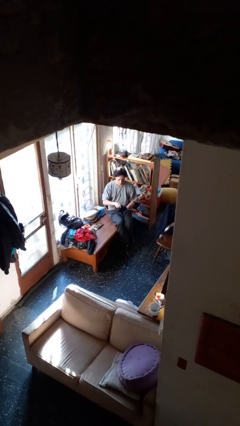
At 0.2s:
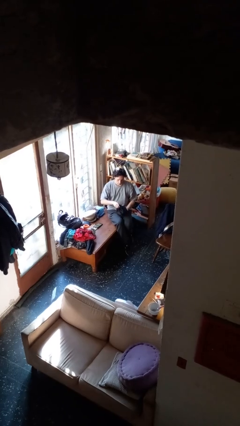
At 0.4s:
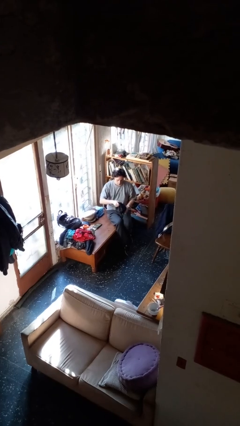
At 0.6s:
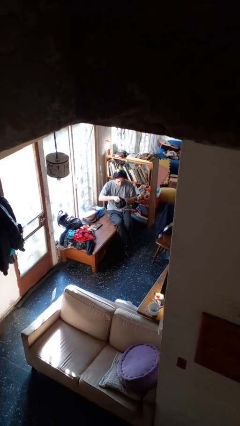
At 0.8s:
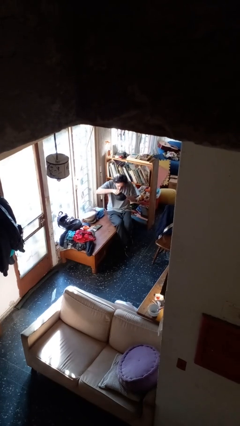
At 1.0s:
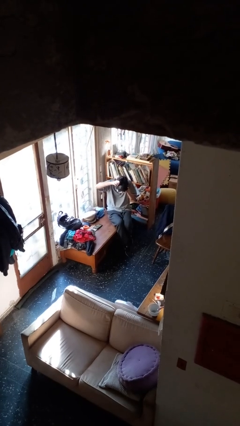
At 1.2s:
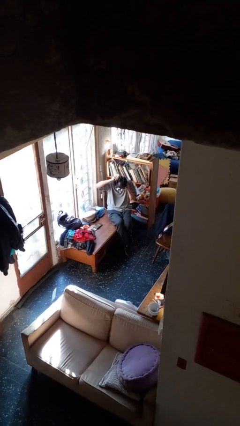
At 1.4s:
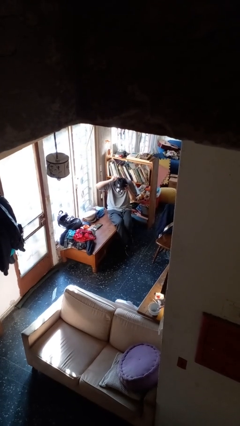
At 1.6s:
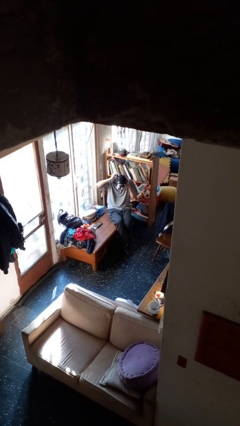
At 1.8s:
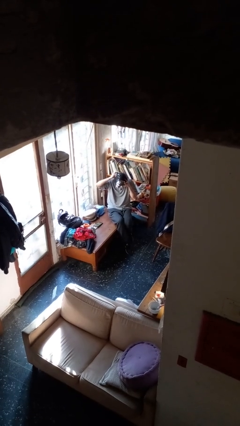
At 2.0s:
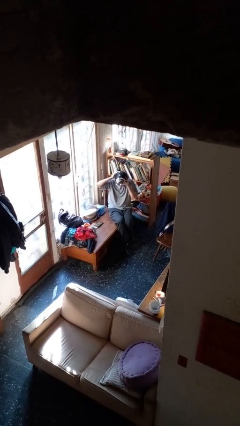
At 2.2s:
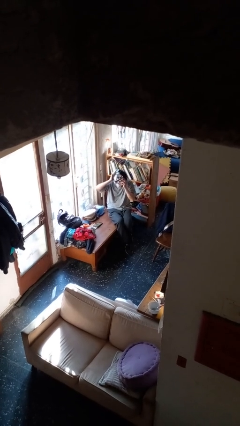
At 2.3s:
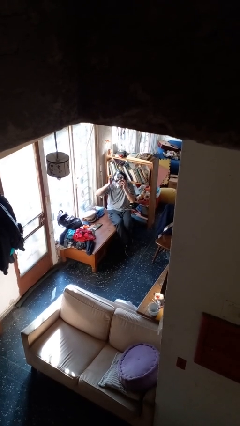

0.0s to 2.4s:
person puts on facemask

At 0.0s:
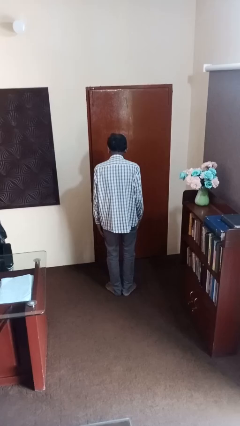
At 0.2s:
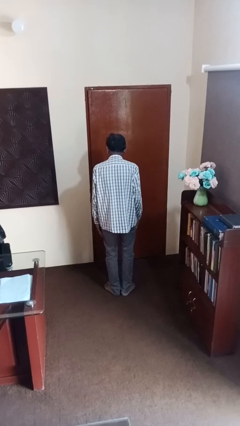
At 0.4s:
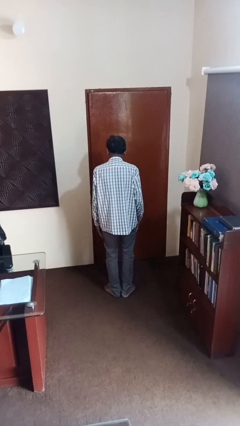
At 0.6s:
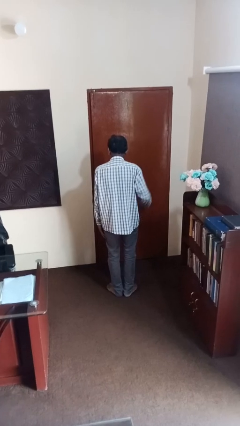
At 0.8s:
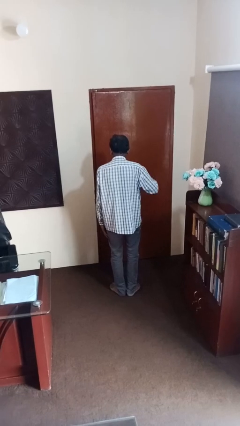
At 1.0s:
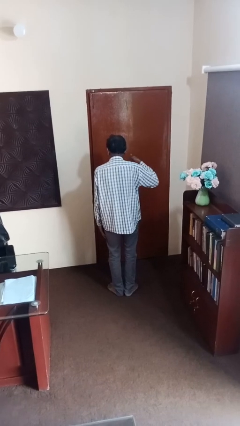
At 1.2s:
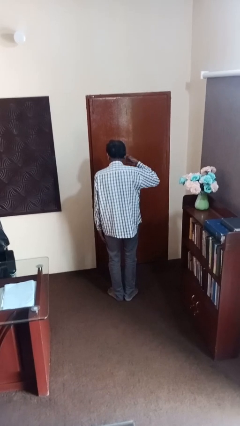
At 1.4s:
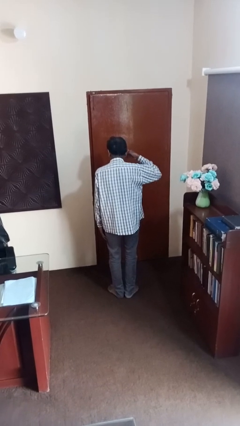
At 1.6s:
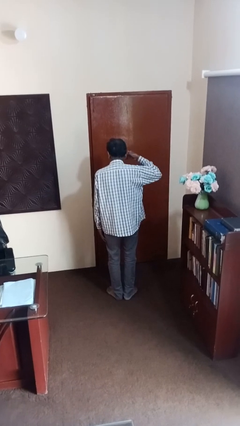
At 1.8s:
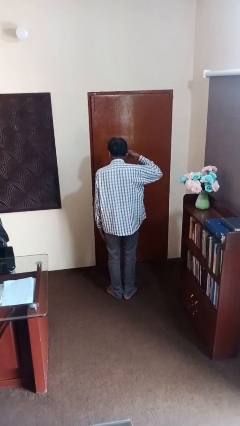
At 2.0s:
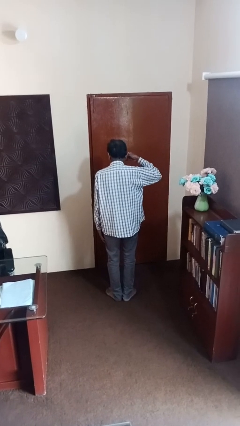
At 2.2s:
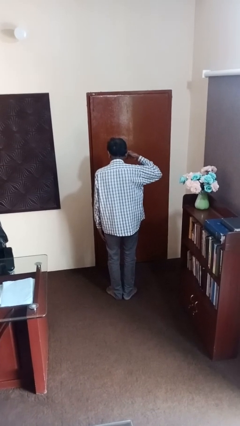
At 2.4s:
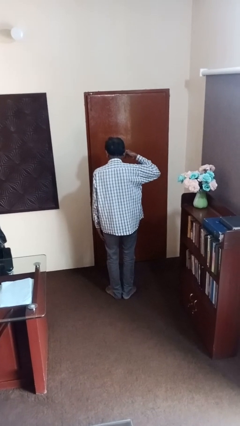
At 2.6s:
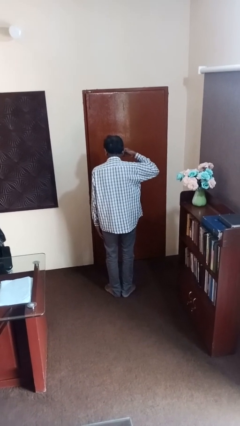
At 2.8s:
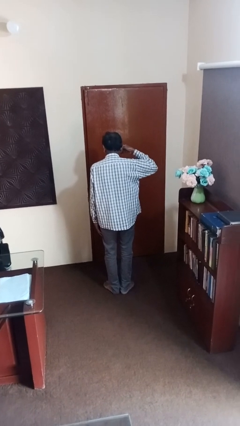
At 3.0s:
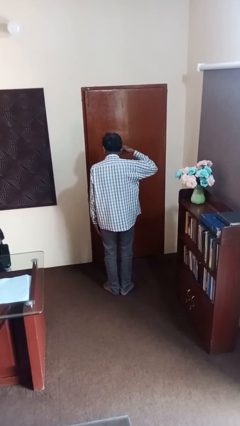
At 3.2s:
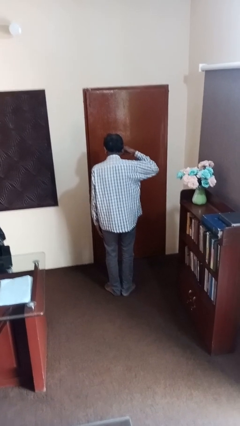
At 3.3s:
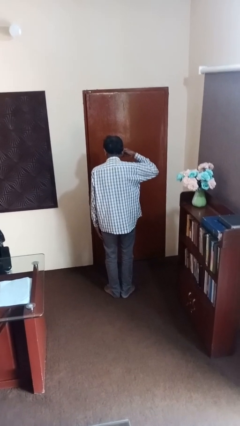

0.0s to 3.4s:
person gestures call me

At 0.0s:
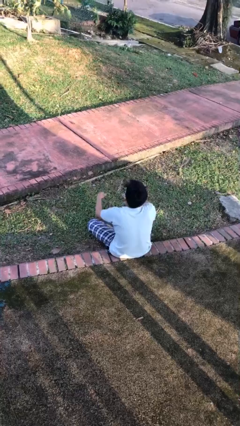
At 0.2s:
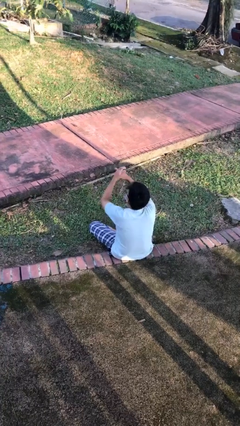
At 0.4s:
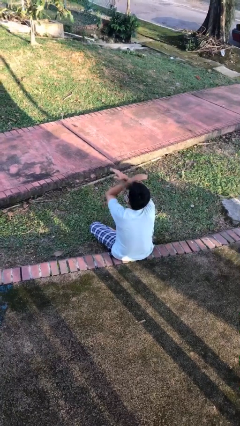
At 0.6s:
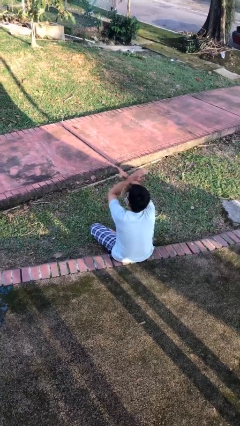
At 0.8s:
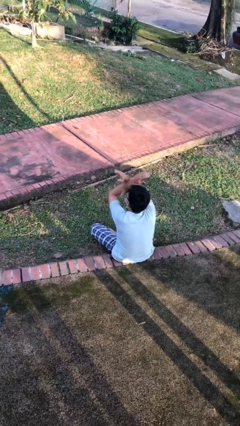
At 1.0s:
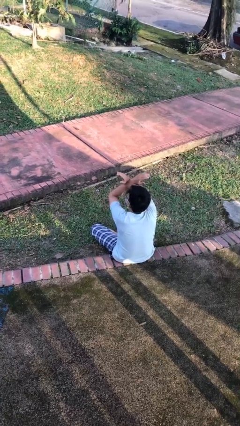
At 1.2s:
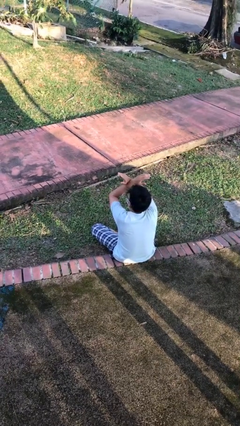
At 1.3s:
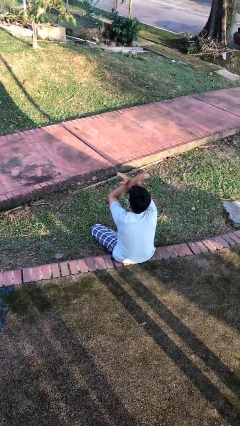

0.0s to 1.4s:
person gestures arms x

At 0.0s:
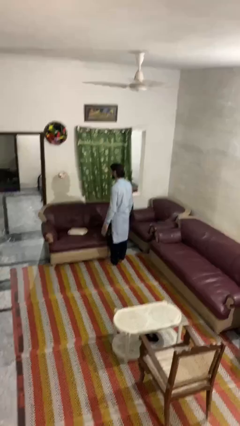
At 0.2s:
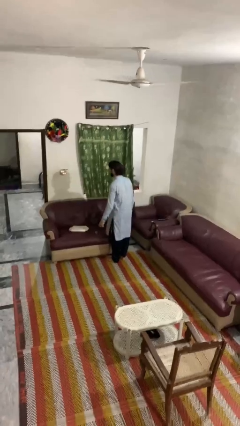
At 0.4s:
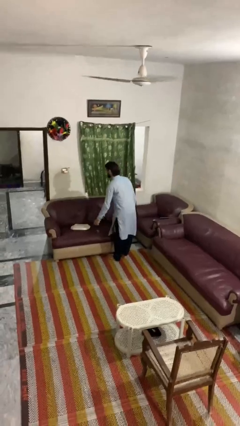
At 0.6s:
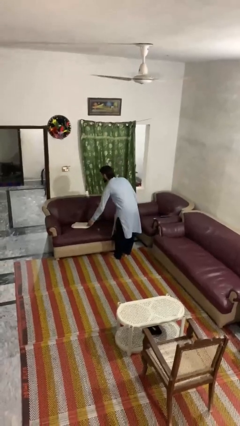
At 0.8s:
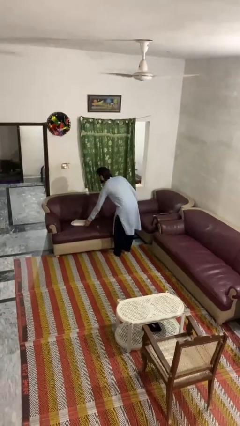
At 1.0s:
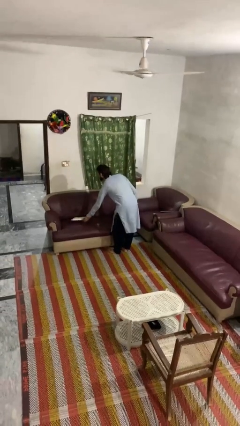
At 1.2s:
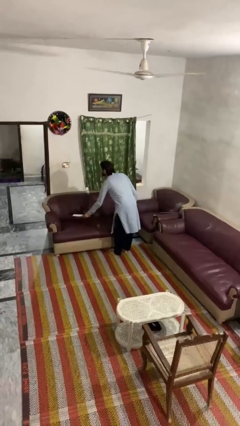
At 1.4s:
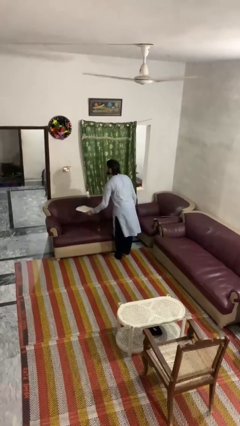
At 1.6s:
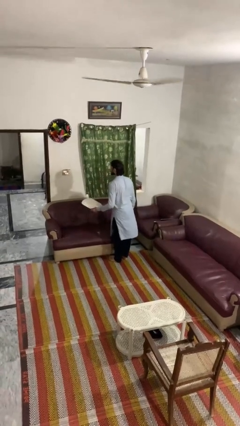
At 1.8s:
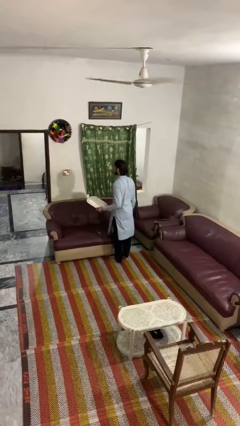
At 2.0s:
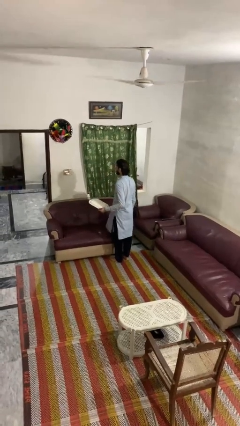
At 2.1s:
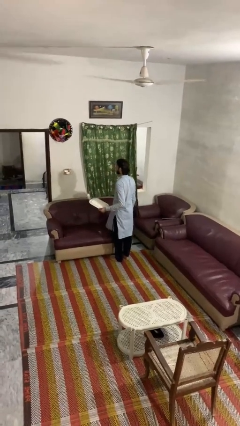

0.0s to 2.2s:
person picks up object from couch

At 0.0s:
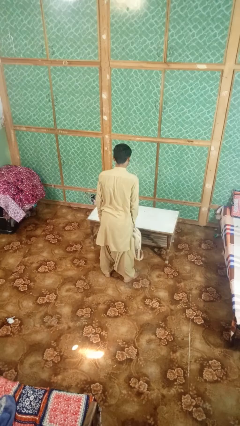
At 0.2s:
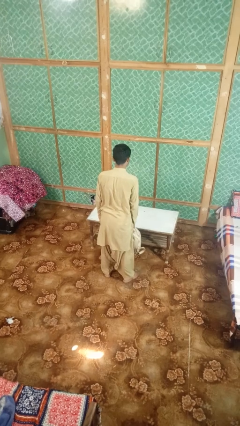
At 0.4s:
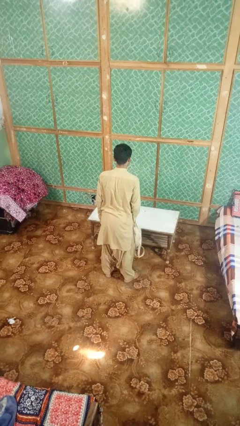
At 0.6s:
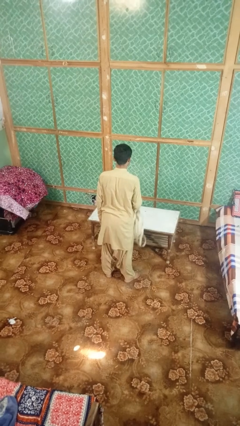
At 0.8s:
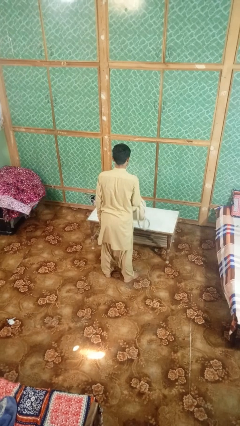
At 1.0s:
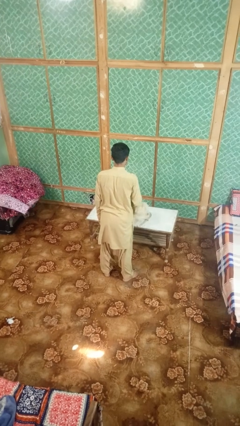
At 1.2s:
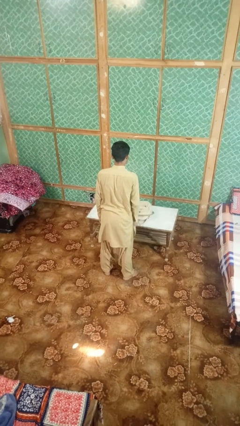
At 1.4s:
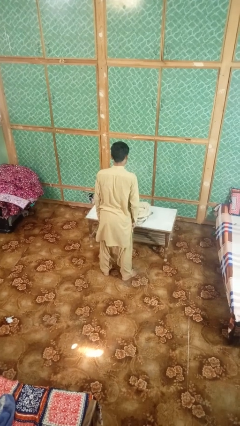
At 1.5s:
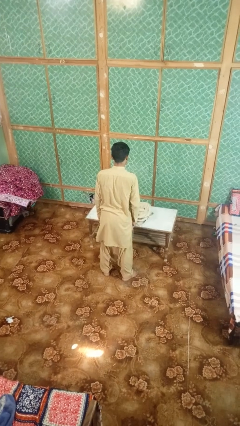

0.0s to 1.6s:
person throws object on table

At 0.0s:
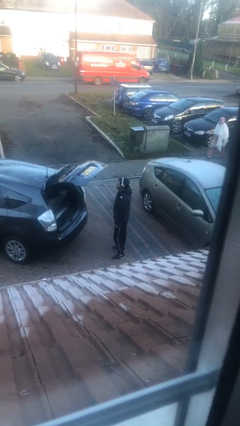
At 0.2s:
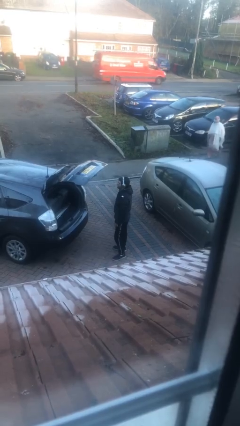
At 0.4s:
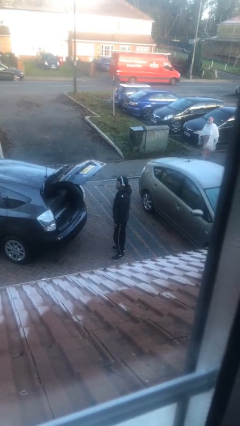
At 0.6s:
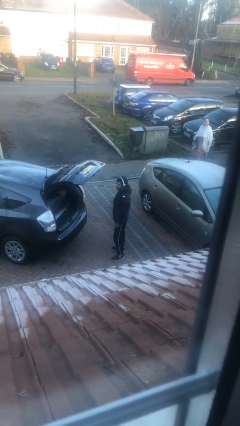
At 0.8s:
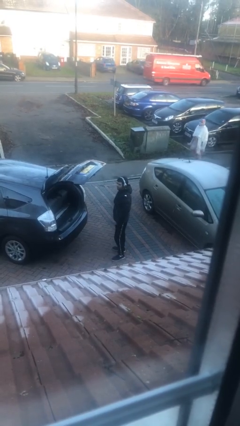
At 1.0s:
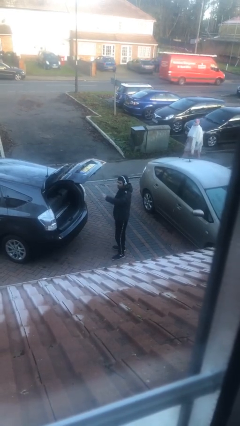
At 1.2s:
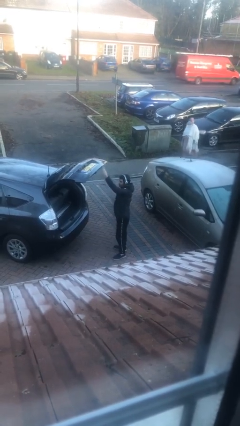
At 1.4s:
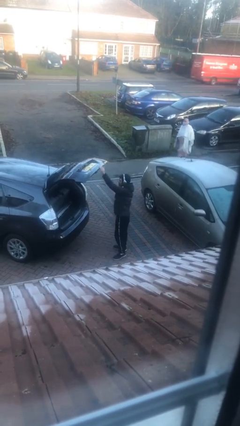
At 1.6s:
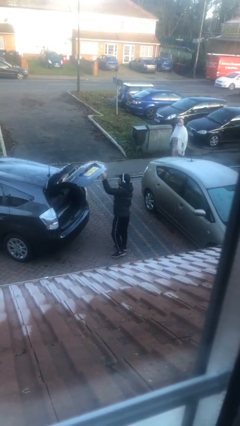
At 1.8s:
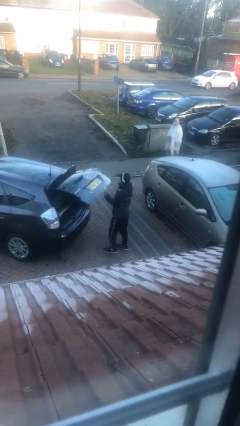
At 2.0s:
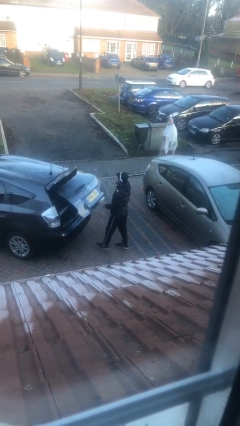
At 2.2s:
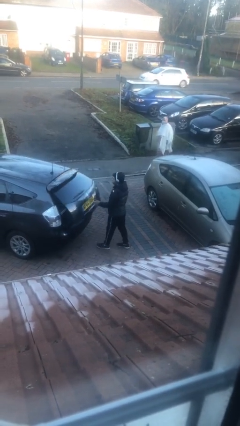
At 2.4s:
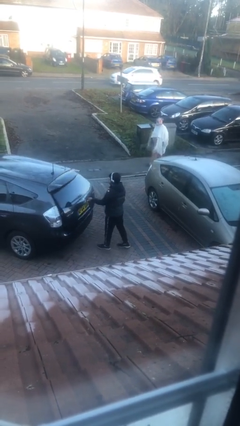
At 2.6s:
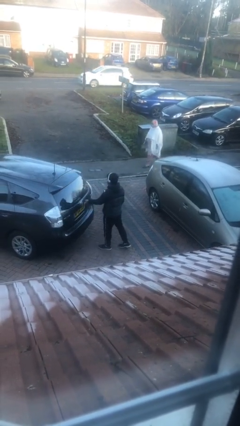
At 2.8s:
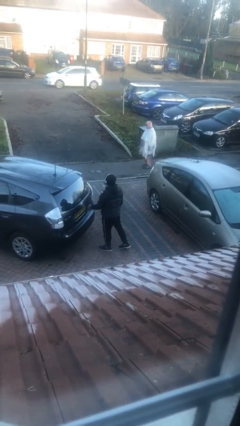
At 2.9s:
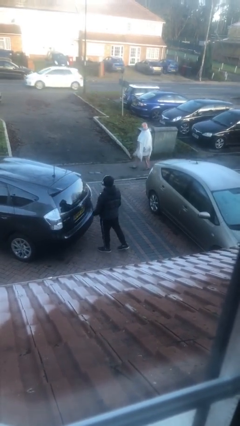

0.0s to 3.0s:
person closes car trunk

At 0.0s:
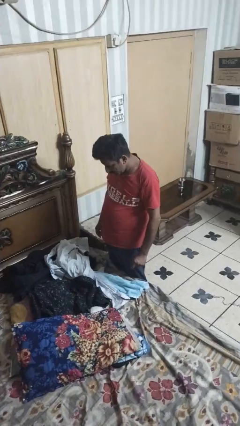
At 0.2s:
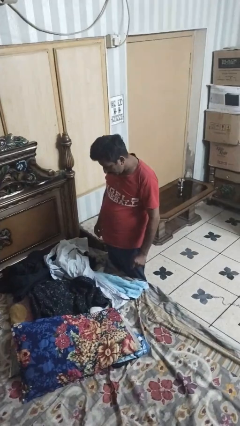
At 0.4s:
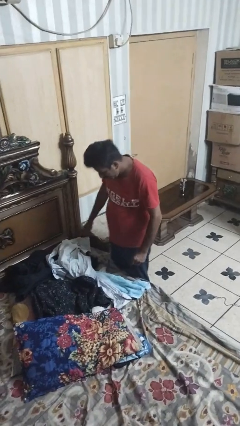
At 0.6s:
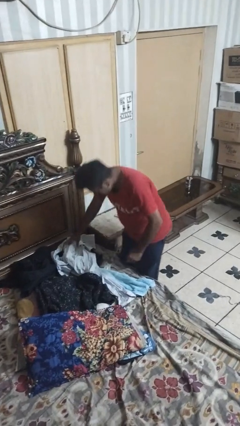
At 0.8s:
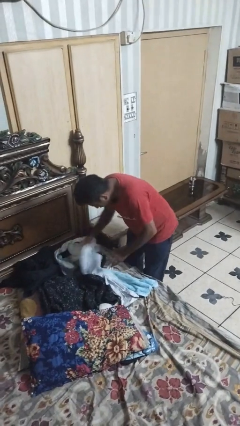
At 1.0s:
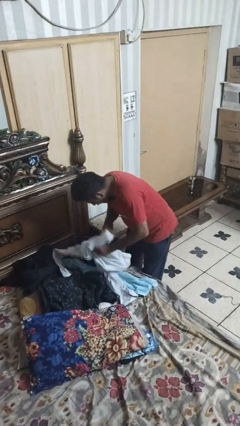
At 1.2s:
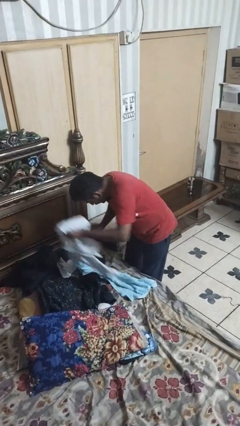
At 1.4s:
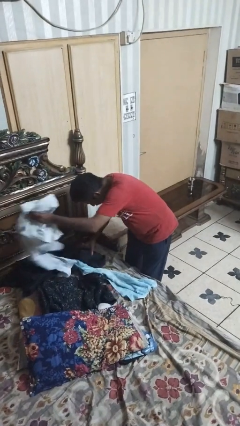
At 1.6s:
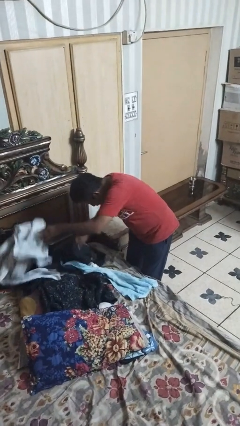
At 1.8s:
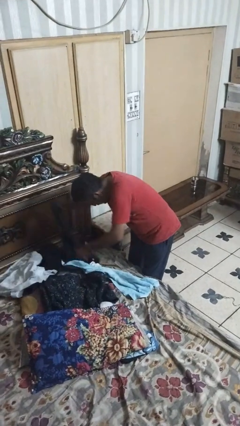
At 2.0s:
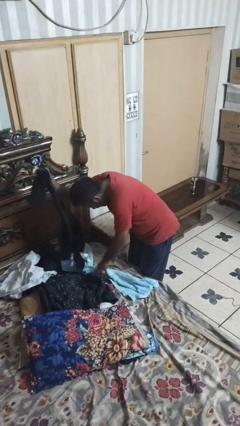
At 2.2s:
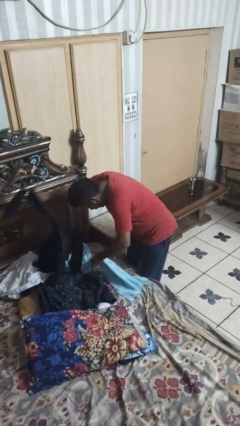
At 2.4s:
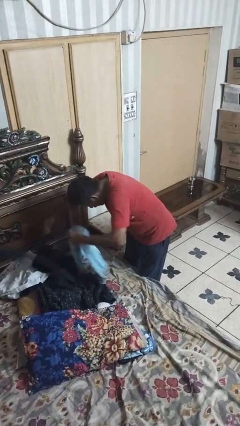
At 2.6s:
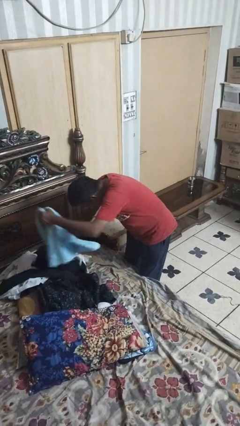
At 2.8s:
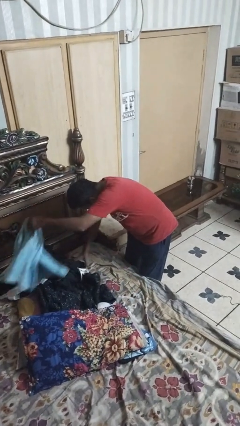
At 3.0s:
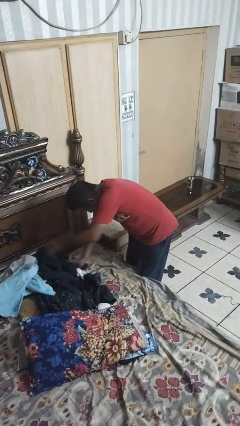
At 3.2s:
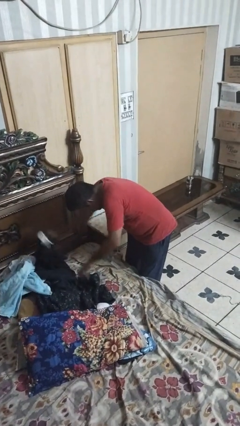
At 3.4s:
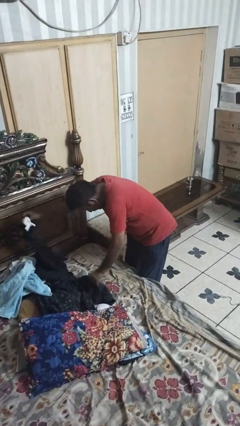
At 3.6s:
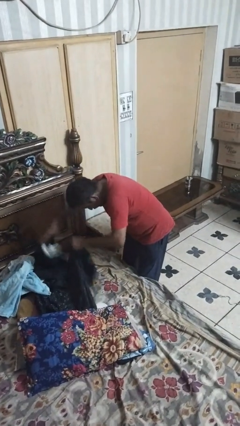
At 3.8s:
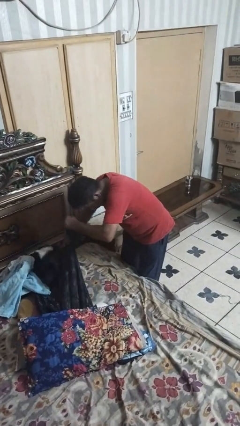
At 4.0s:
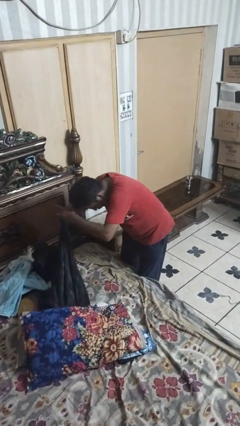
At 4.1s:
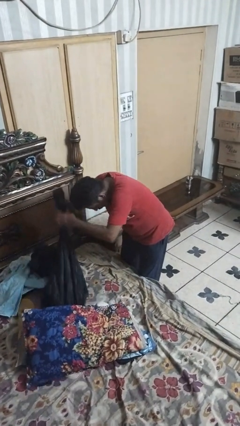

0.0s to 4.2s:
person searches under bed
